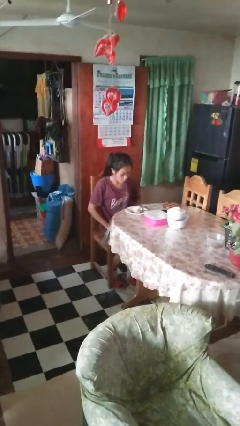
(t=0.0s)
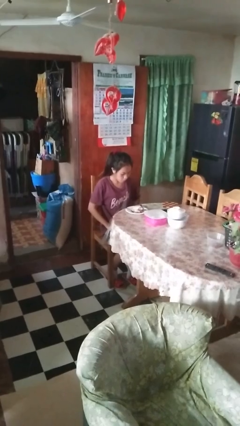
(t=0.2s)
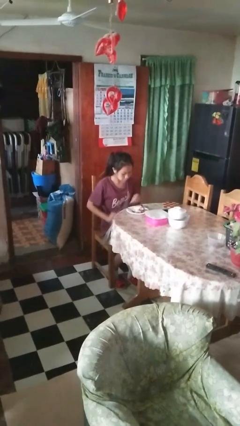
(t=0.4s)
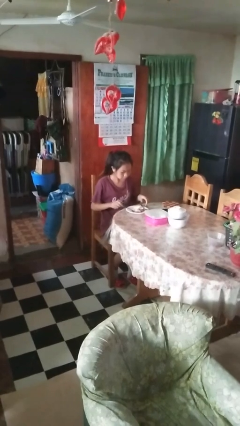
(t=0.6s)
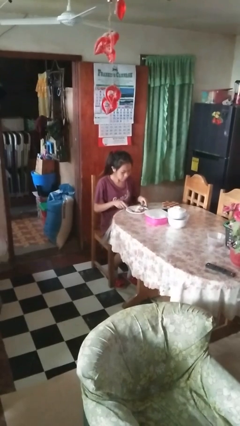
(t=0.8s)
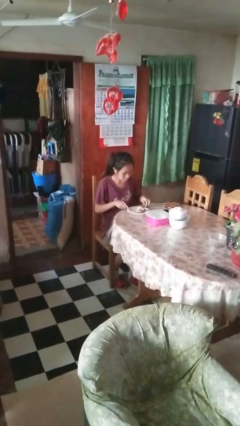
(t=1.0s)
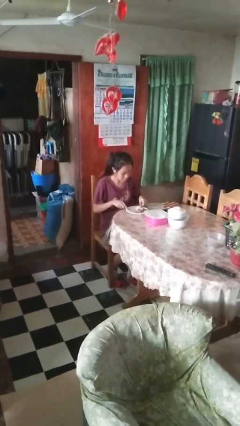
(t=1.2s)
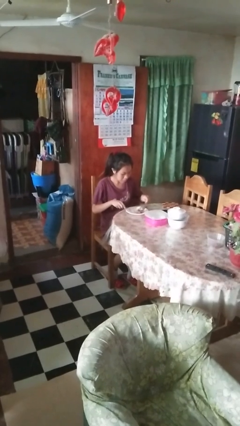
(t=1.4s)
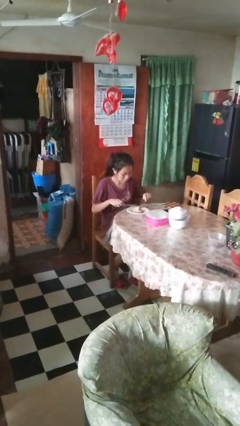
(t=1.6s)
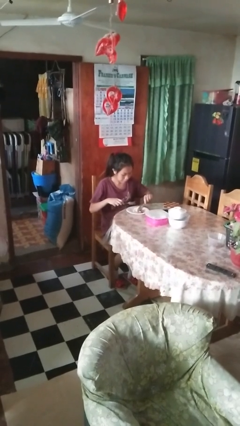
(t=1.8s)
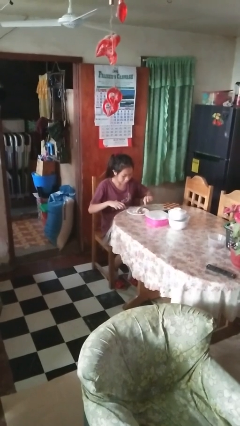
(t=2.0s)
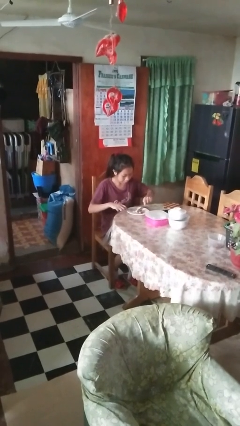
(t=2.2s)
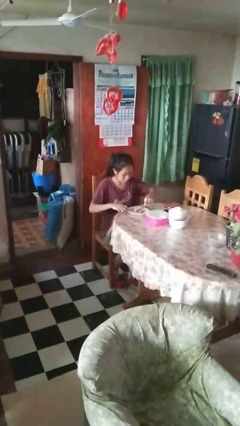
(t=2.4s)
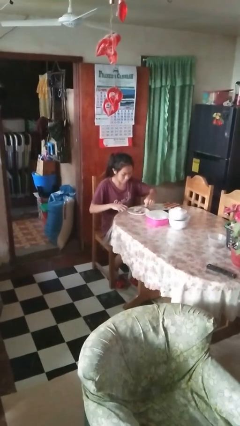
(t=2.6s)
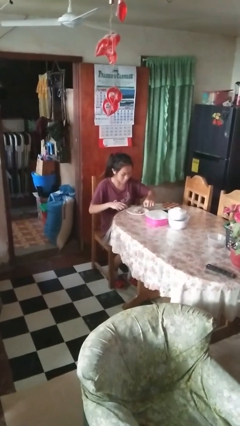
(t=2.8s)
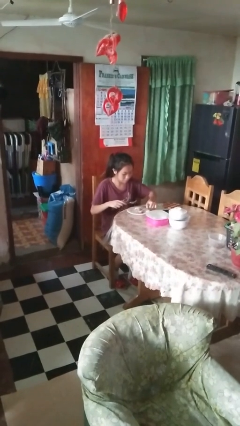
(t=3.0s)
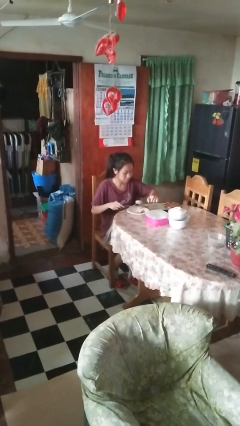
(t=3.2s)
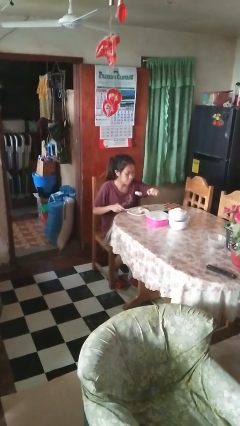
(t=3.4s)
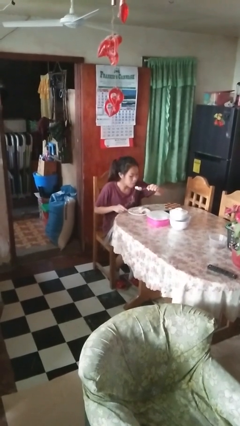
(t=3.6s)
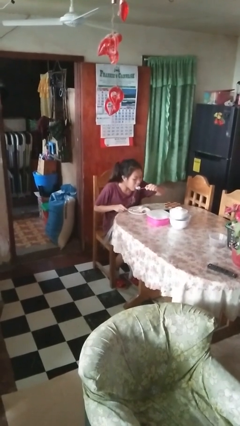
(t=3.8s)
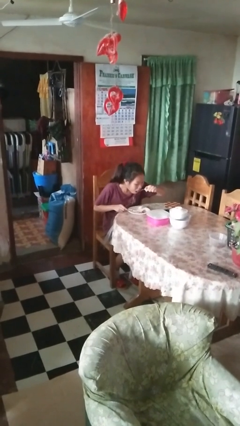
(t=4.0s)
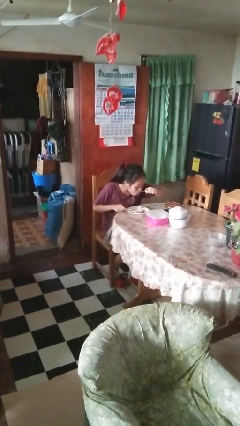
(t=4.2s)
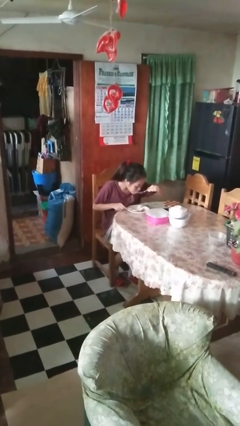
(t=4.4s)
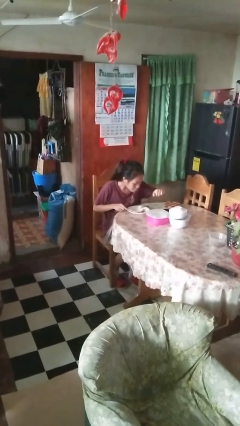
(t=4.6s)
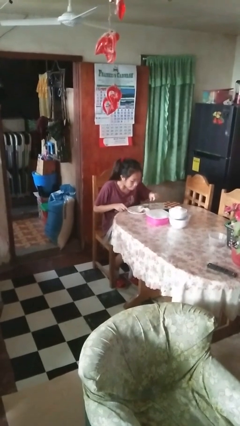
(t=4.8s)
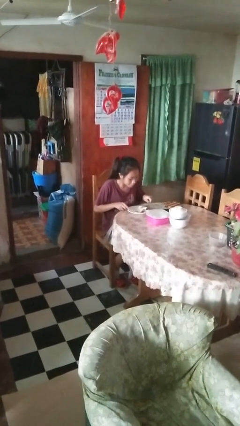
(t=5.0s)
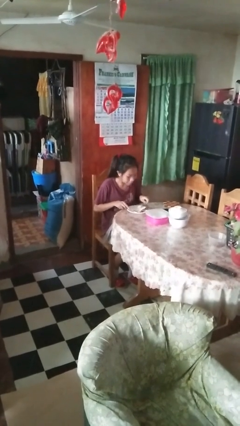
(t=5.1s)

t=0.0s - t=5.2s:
person eats with utensil

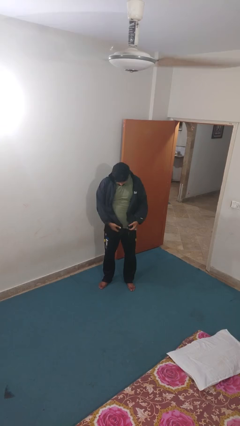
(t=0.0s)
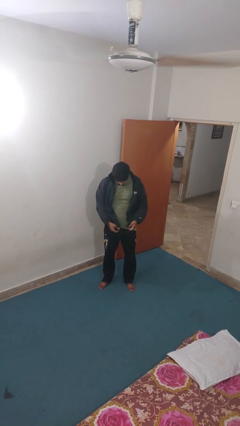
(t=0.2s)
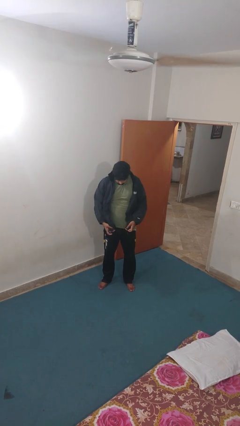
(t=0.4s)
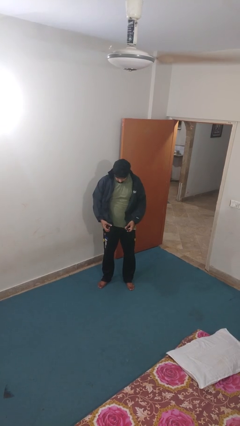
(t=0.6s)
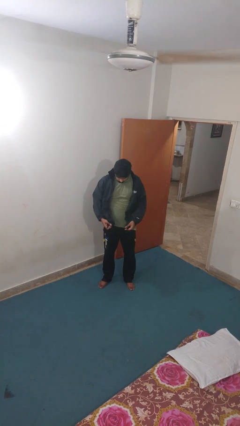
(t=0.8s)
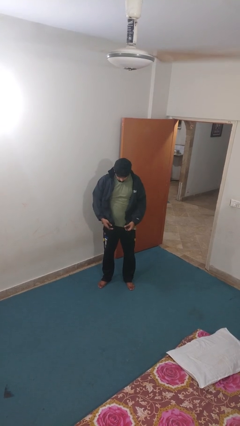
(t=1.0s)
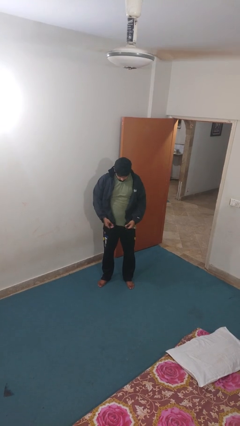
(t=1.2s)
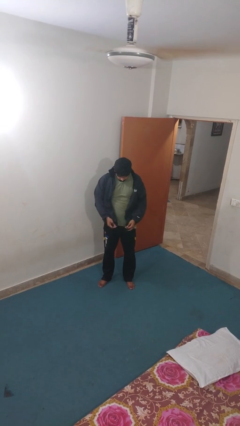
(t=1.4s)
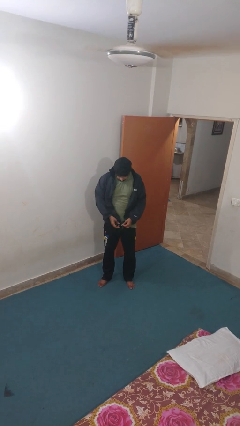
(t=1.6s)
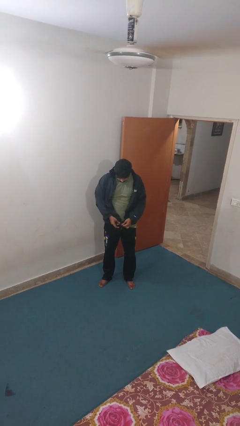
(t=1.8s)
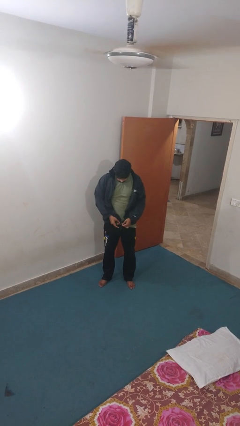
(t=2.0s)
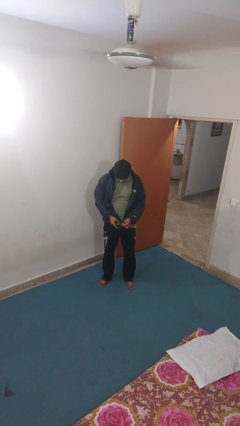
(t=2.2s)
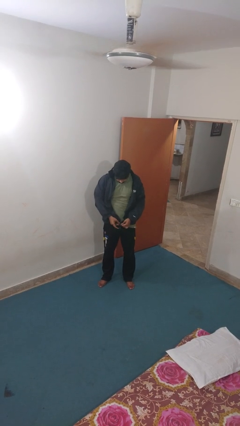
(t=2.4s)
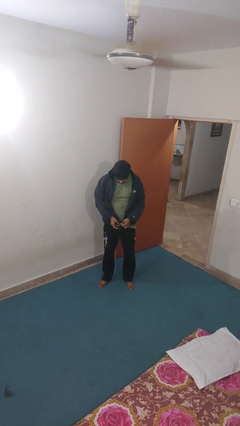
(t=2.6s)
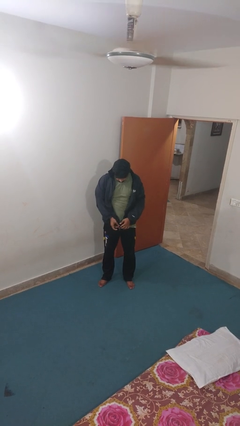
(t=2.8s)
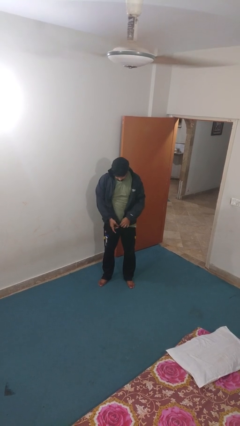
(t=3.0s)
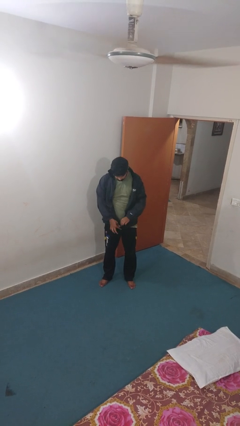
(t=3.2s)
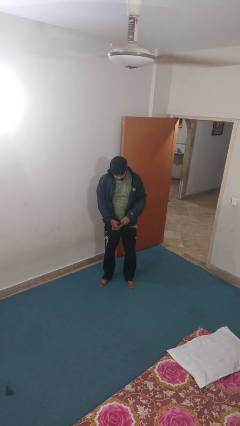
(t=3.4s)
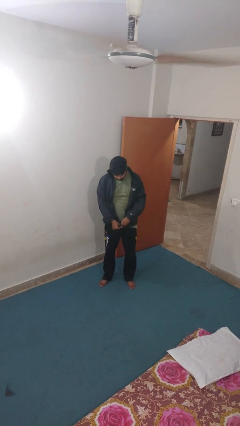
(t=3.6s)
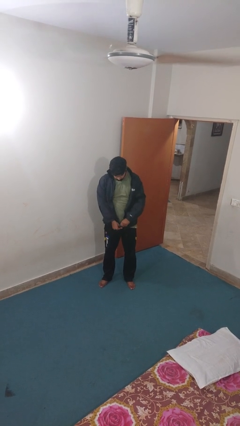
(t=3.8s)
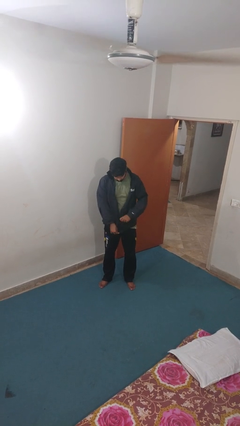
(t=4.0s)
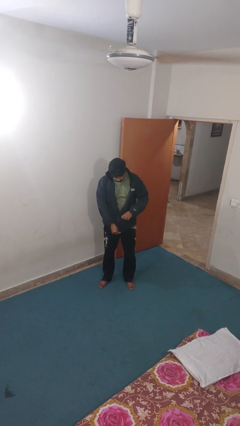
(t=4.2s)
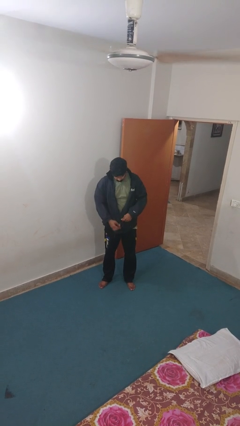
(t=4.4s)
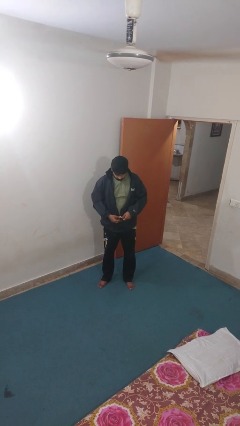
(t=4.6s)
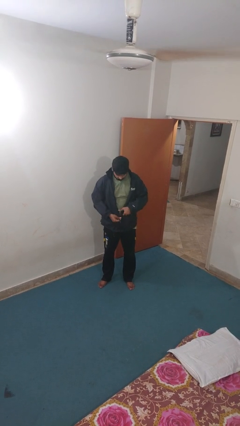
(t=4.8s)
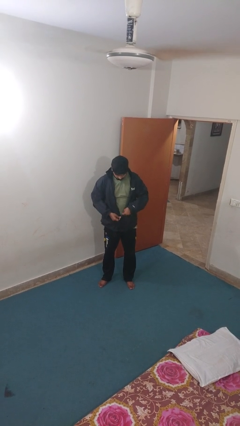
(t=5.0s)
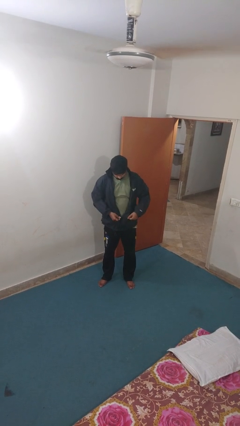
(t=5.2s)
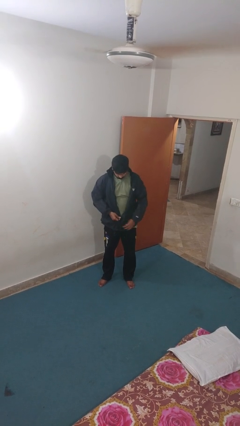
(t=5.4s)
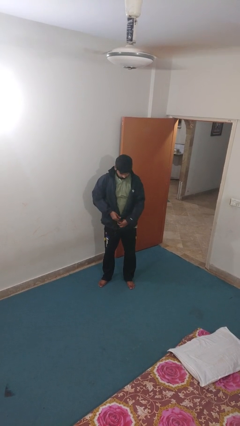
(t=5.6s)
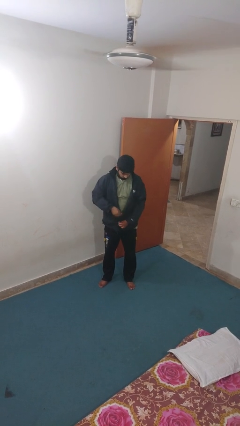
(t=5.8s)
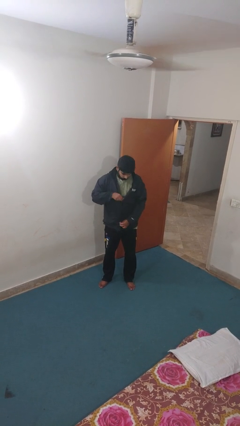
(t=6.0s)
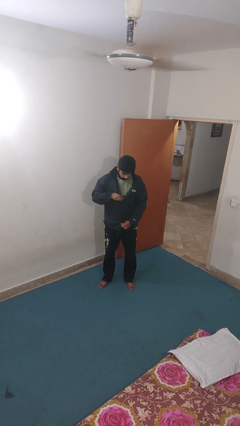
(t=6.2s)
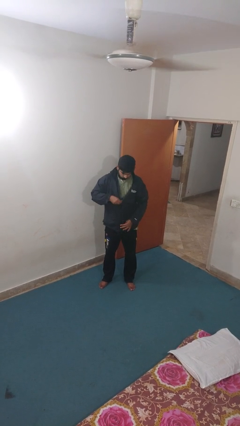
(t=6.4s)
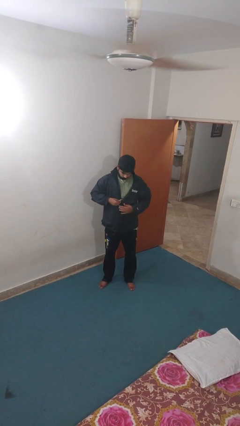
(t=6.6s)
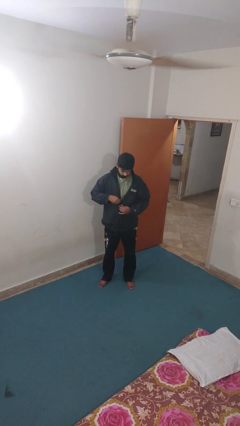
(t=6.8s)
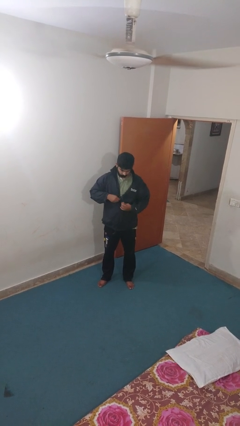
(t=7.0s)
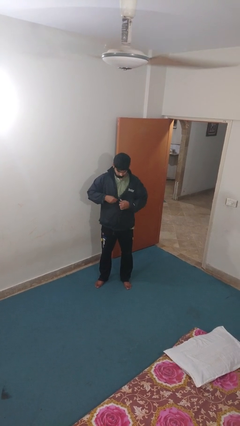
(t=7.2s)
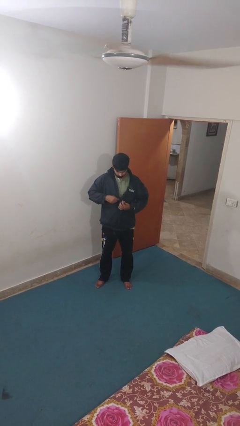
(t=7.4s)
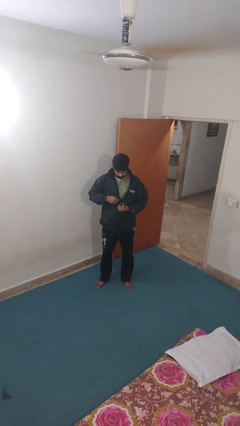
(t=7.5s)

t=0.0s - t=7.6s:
person zips up jacket

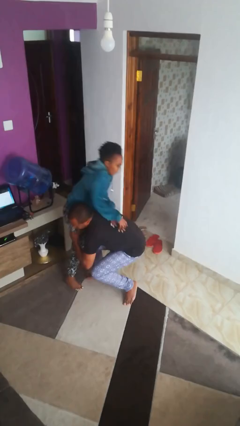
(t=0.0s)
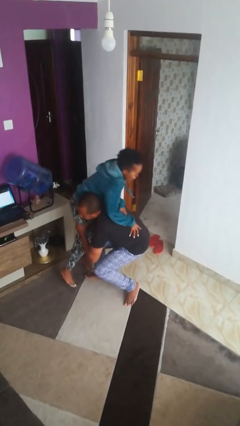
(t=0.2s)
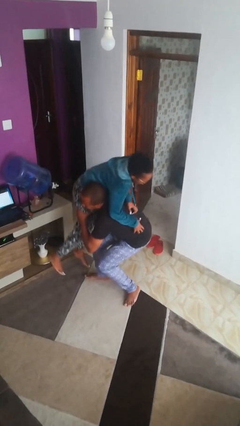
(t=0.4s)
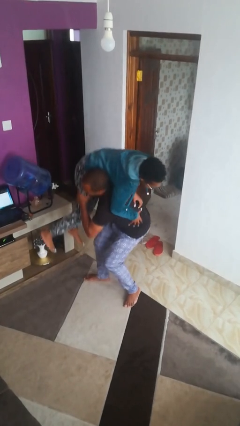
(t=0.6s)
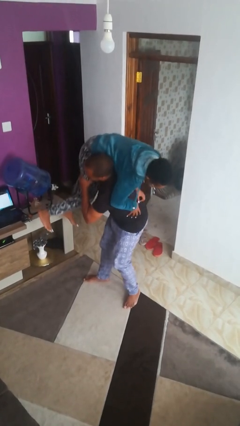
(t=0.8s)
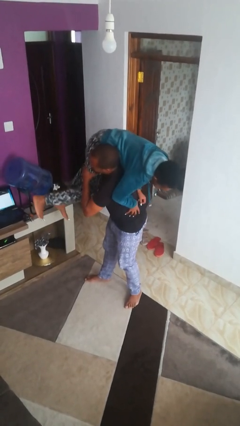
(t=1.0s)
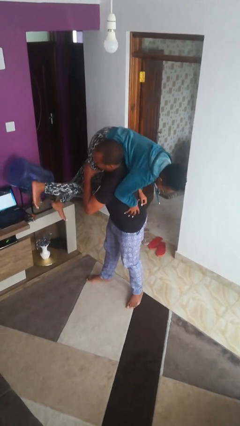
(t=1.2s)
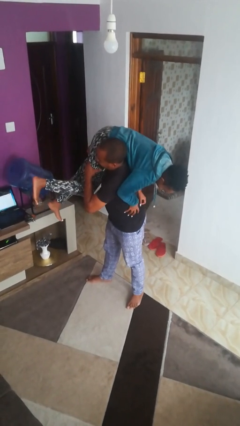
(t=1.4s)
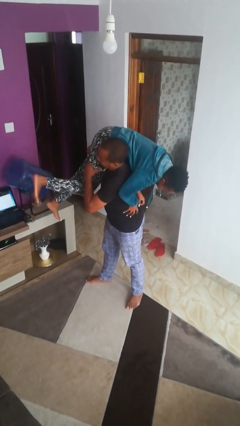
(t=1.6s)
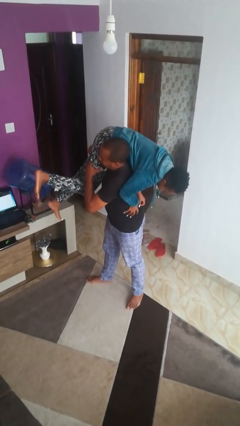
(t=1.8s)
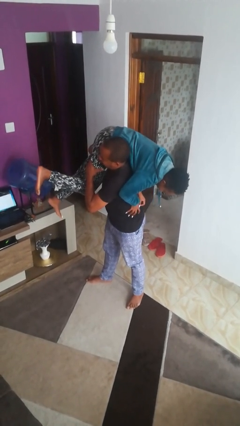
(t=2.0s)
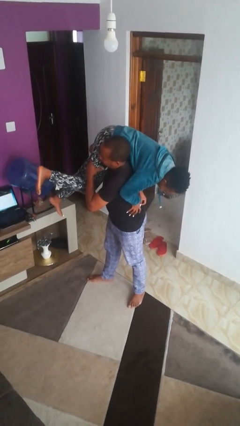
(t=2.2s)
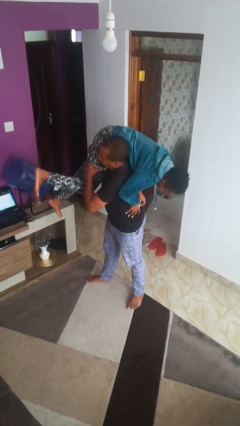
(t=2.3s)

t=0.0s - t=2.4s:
person carries person over shoulder

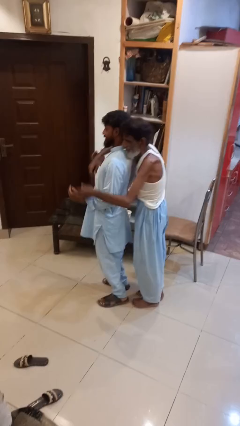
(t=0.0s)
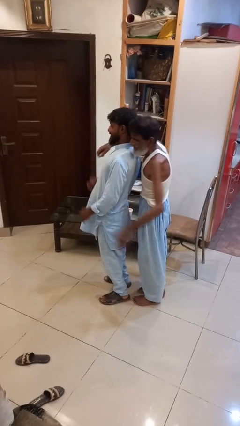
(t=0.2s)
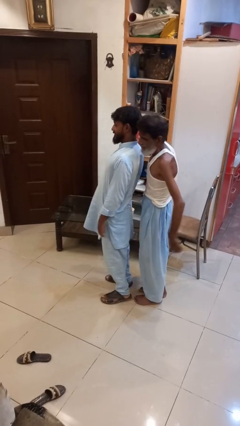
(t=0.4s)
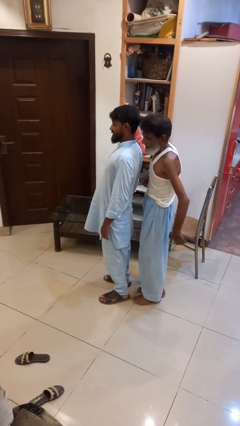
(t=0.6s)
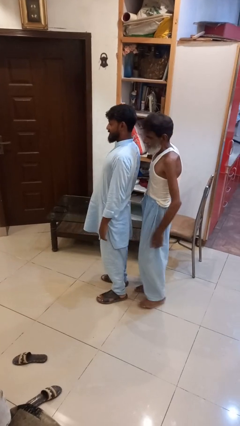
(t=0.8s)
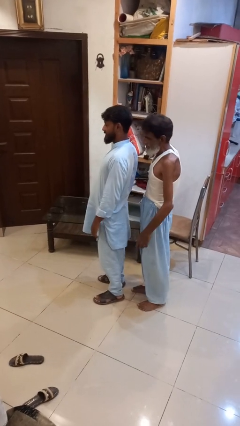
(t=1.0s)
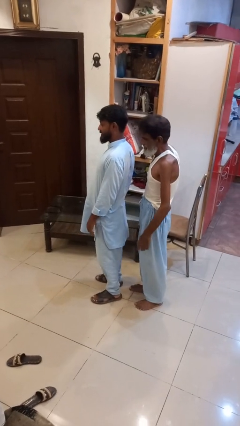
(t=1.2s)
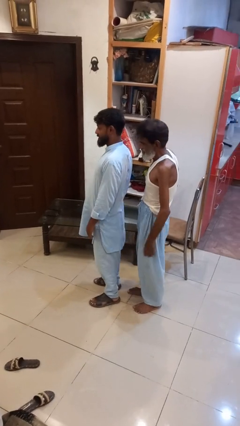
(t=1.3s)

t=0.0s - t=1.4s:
person puts down person

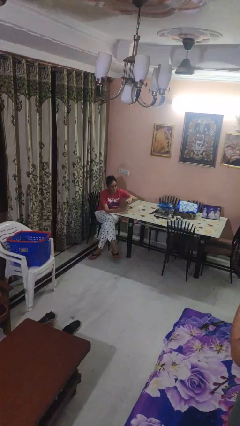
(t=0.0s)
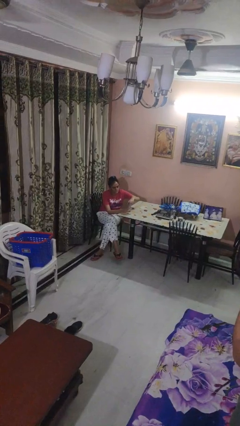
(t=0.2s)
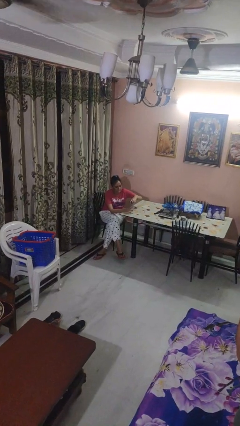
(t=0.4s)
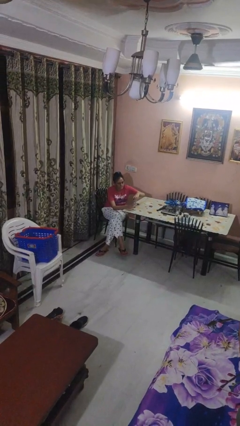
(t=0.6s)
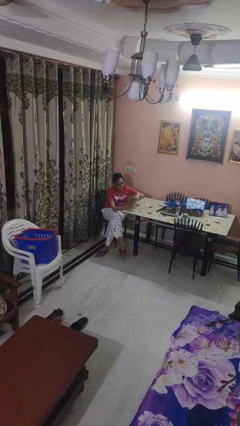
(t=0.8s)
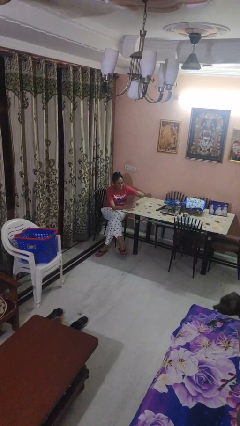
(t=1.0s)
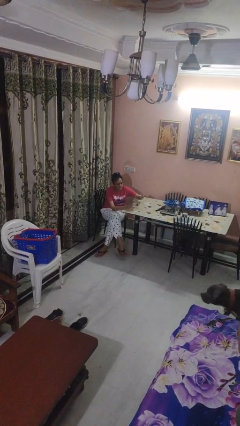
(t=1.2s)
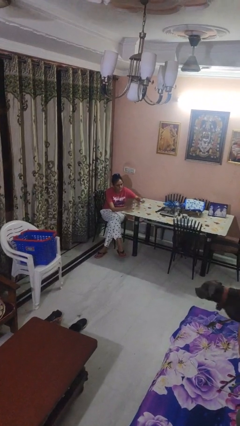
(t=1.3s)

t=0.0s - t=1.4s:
person unscrews lid from bottle
